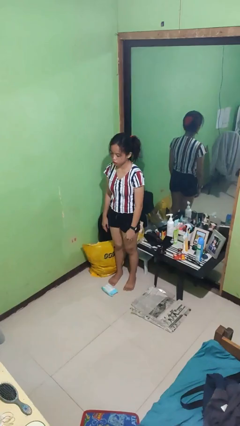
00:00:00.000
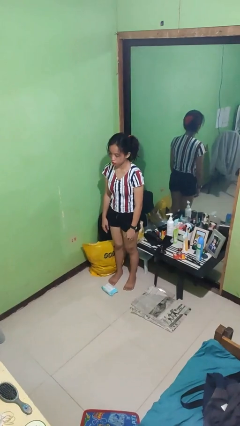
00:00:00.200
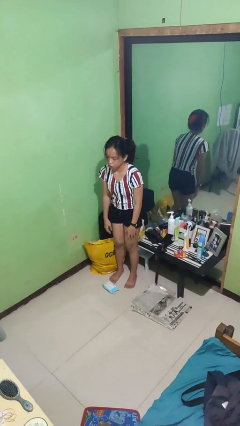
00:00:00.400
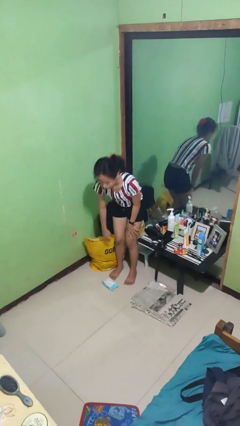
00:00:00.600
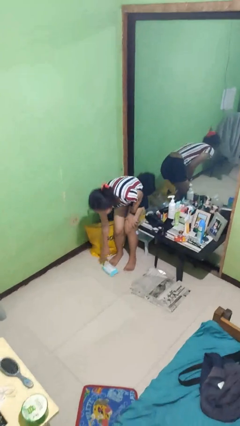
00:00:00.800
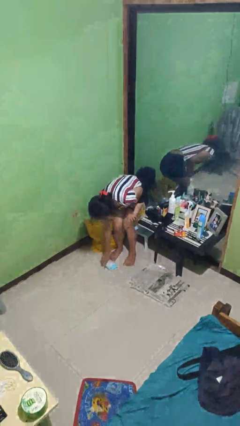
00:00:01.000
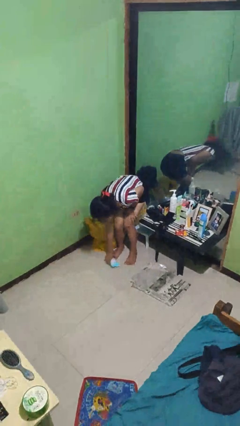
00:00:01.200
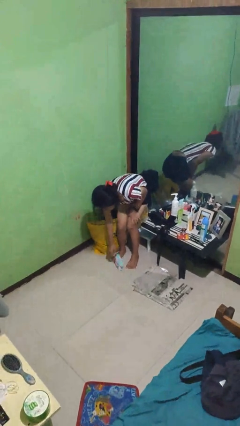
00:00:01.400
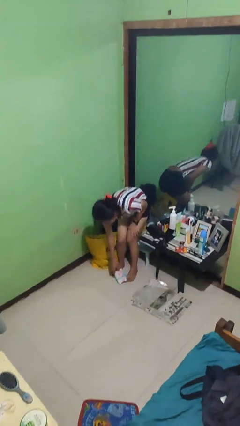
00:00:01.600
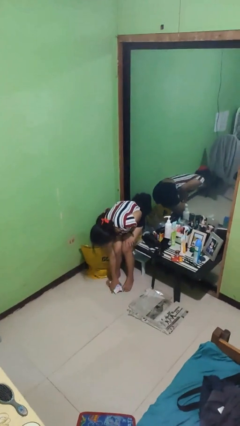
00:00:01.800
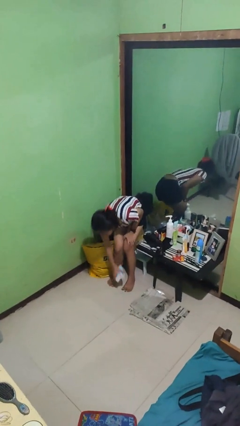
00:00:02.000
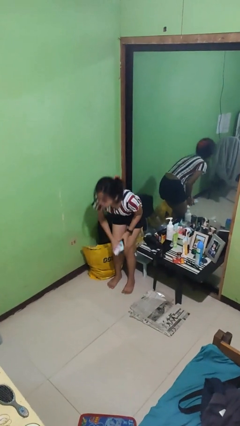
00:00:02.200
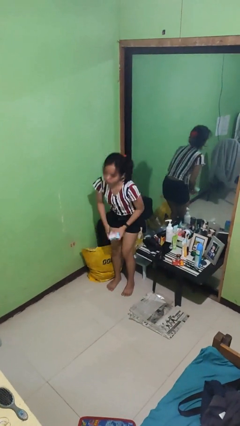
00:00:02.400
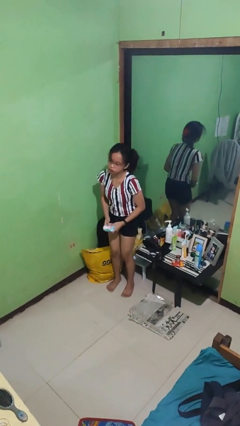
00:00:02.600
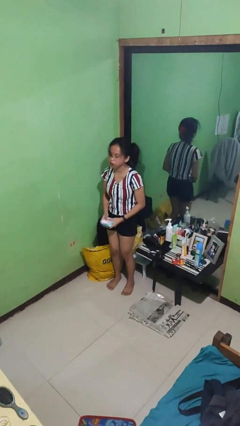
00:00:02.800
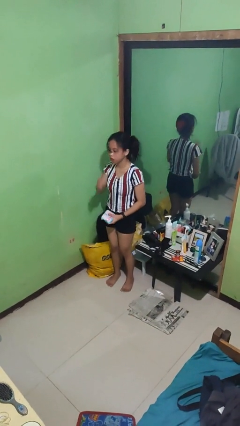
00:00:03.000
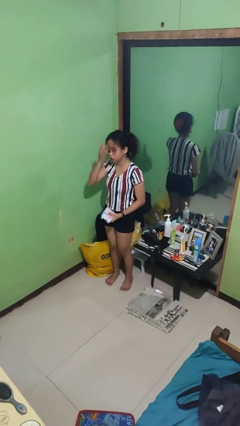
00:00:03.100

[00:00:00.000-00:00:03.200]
person picks up object from floor

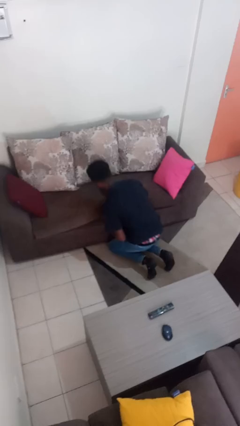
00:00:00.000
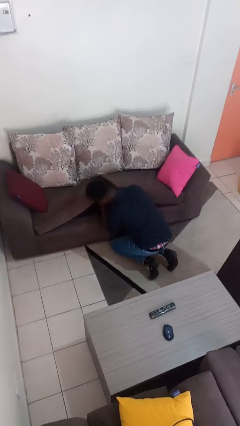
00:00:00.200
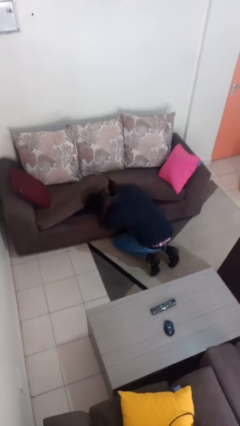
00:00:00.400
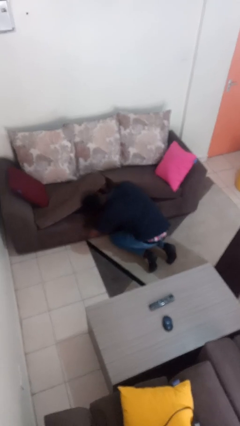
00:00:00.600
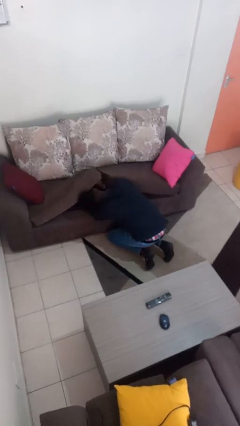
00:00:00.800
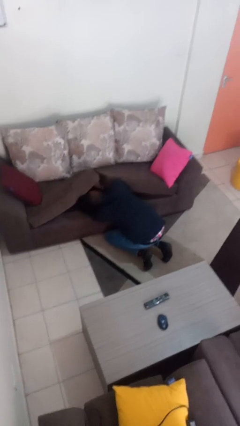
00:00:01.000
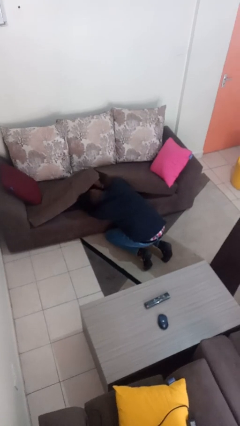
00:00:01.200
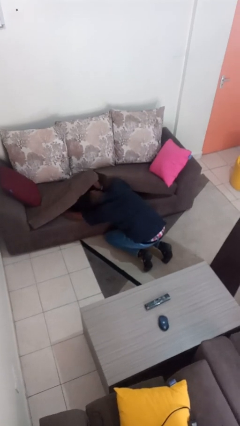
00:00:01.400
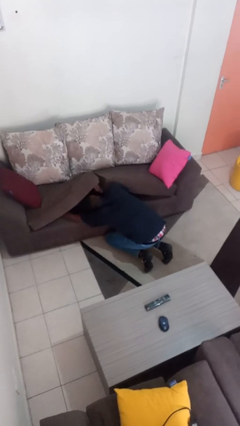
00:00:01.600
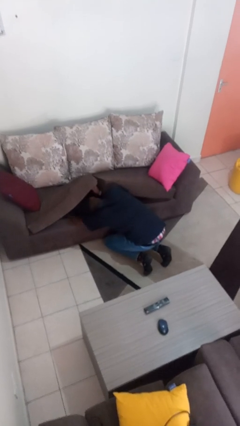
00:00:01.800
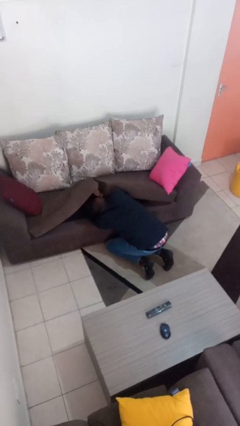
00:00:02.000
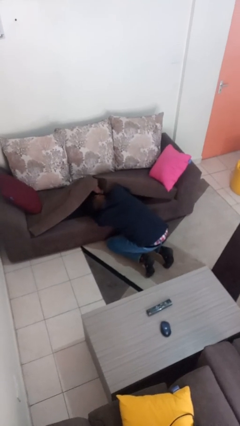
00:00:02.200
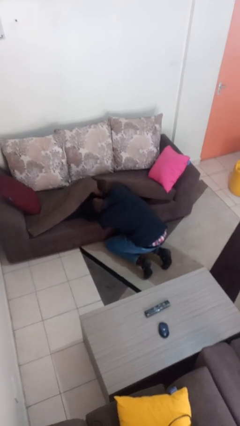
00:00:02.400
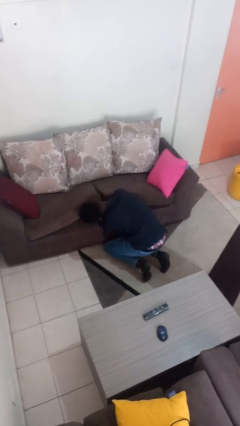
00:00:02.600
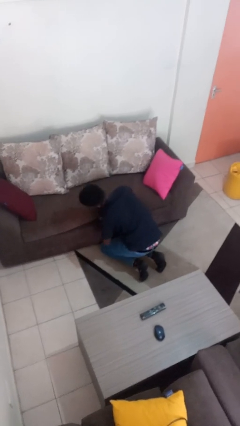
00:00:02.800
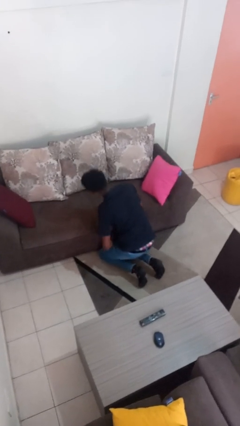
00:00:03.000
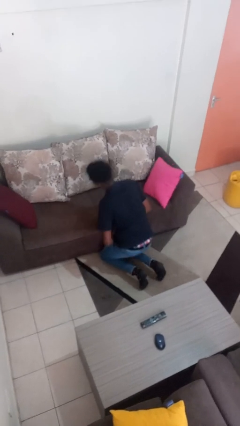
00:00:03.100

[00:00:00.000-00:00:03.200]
person searches under couch

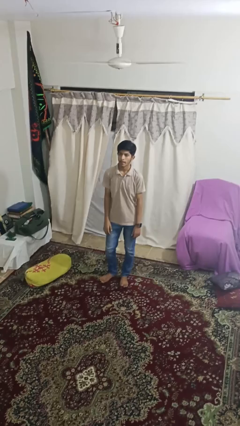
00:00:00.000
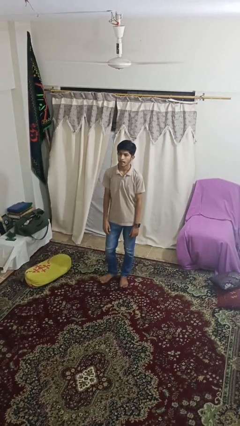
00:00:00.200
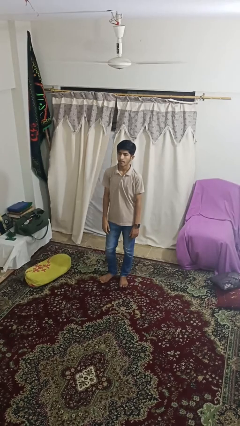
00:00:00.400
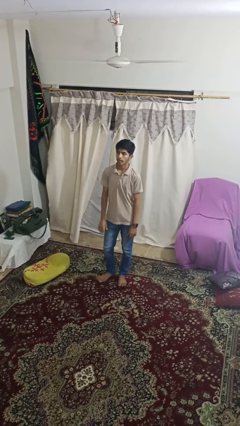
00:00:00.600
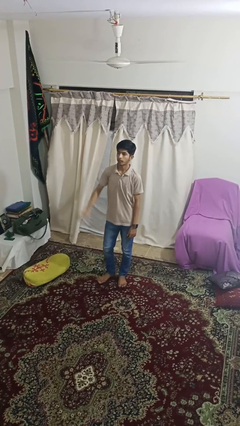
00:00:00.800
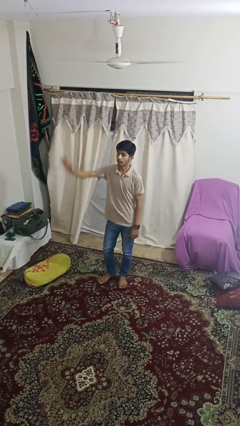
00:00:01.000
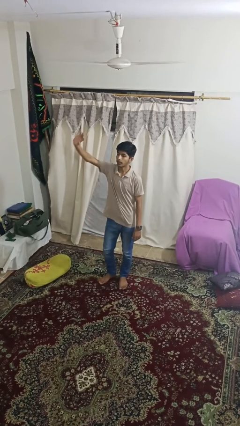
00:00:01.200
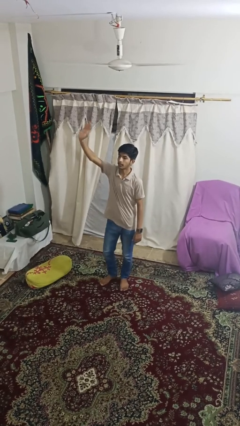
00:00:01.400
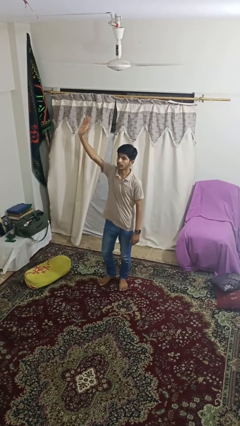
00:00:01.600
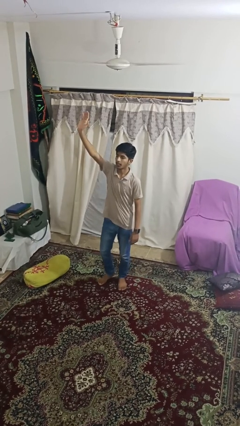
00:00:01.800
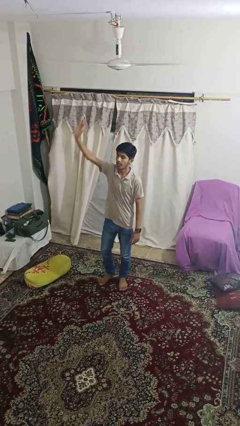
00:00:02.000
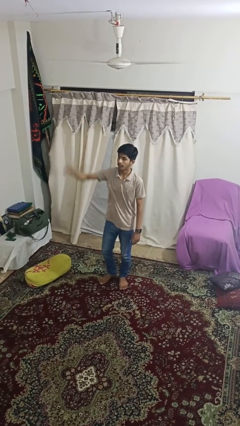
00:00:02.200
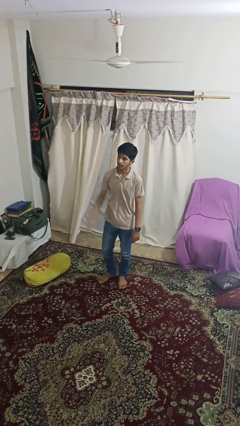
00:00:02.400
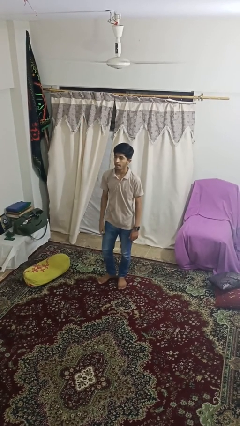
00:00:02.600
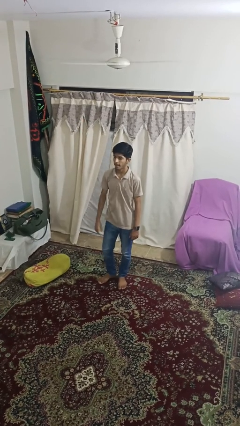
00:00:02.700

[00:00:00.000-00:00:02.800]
person waves at person

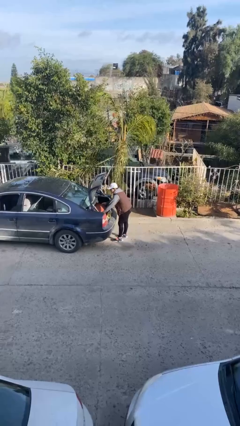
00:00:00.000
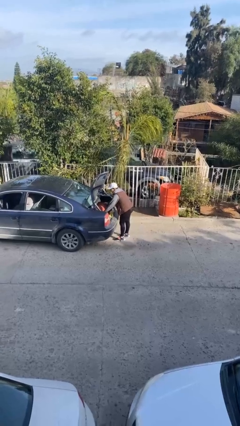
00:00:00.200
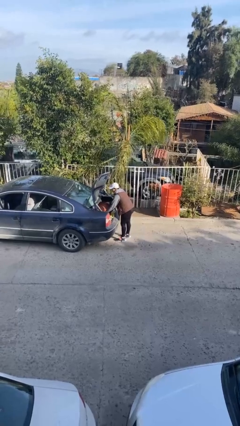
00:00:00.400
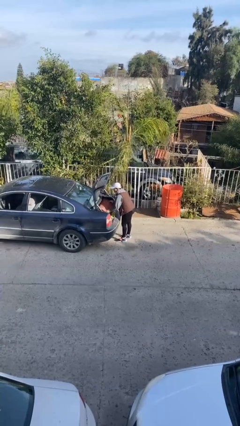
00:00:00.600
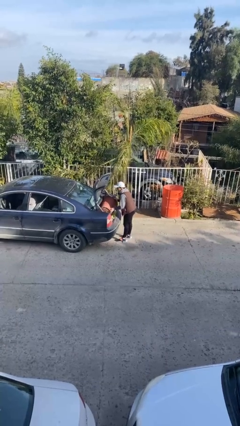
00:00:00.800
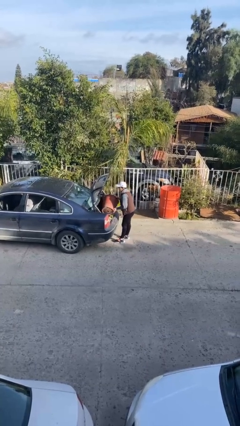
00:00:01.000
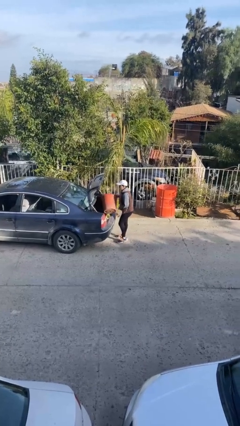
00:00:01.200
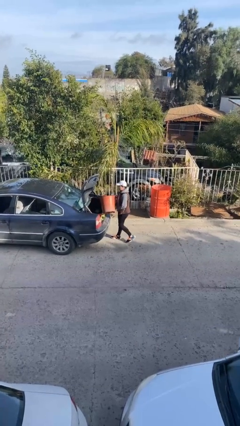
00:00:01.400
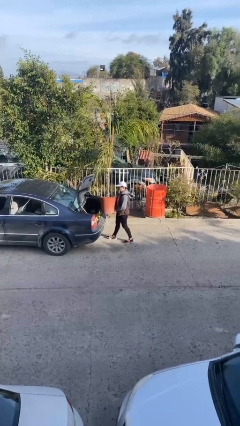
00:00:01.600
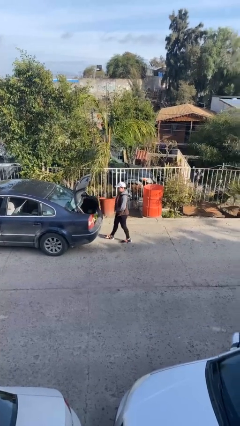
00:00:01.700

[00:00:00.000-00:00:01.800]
person unloads car

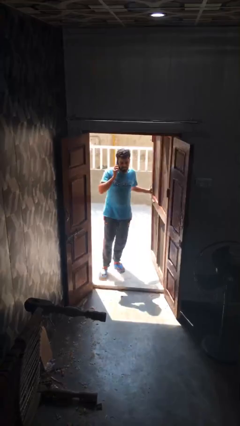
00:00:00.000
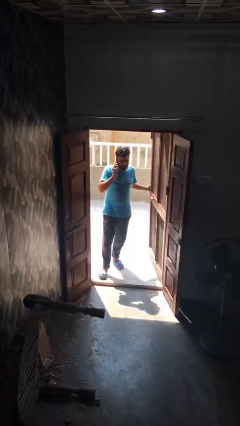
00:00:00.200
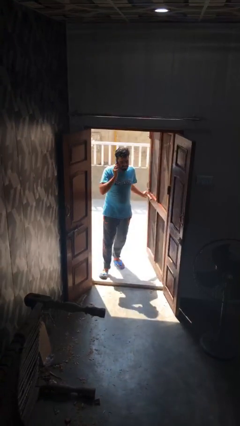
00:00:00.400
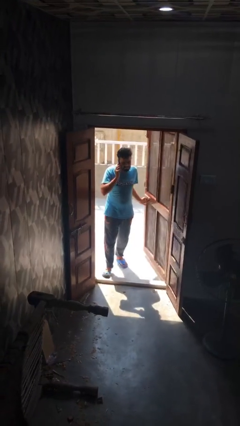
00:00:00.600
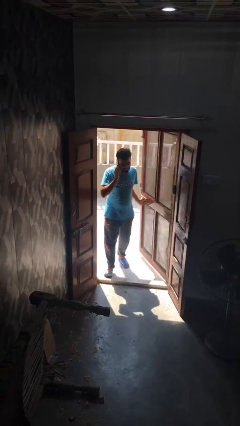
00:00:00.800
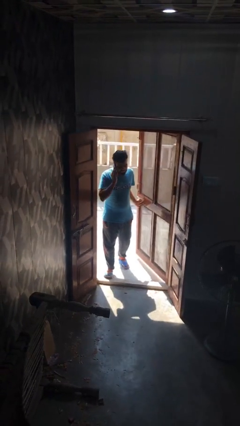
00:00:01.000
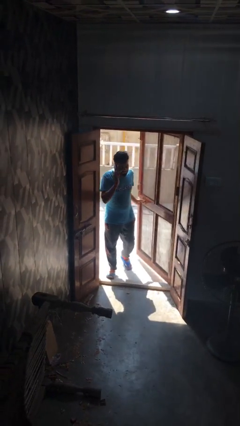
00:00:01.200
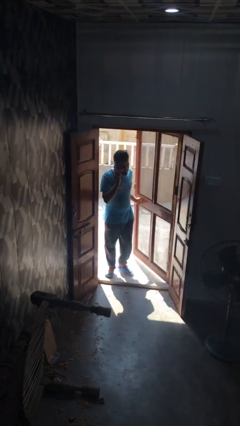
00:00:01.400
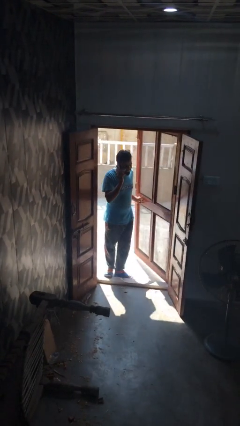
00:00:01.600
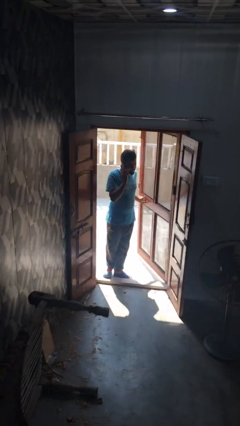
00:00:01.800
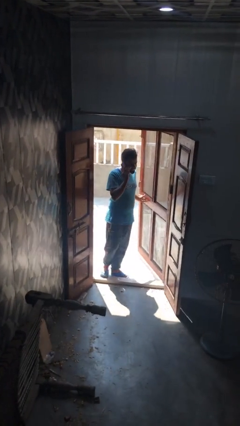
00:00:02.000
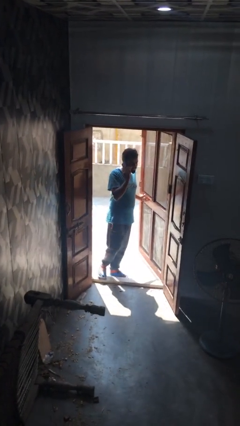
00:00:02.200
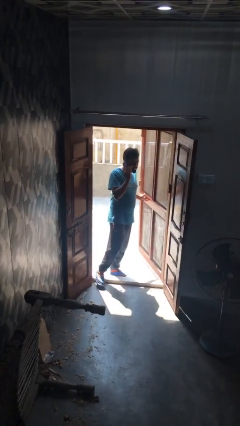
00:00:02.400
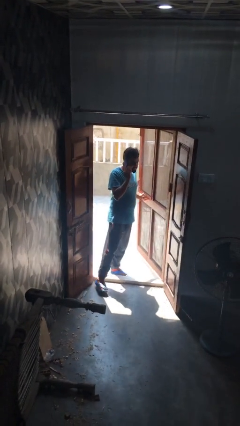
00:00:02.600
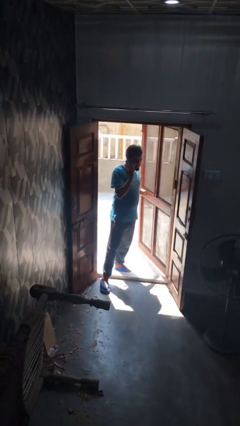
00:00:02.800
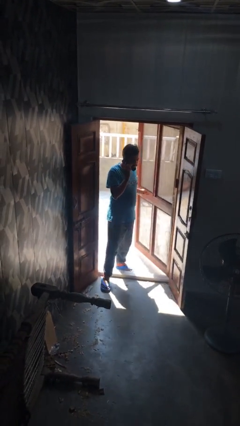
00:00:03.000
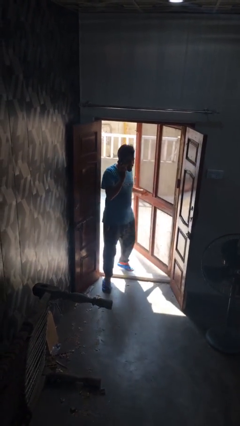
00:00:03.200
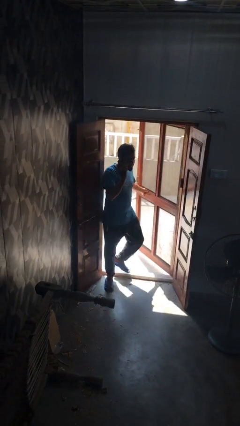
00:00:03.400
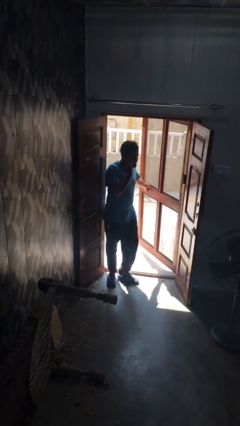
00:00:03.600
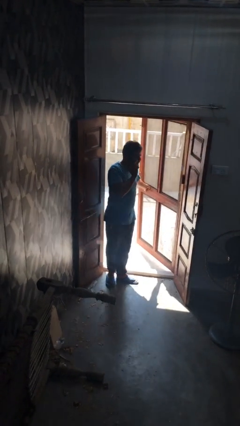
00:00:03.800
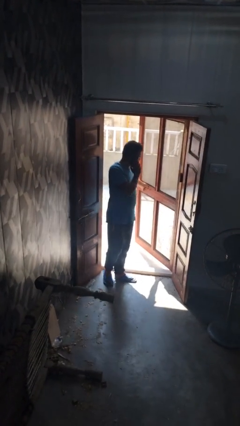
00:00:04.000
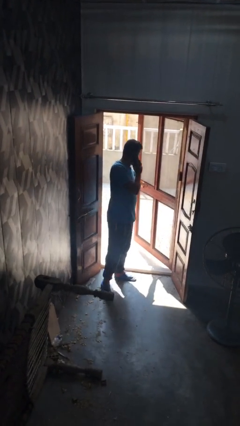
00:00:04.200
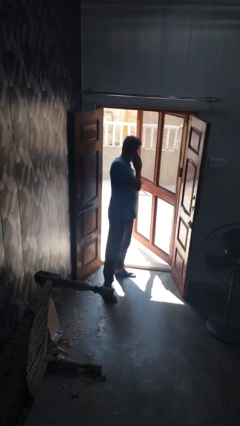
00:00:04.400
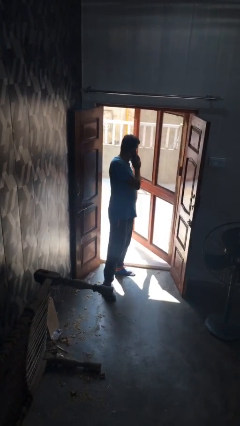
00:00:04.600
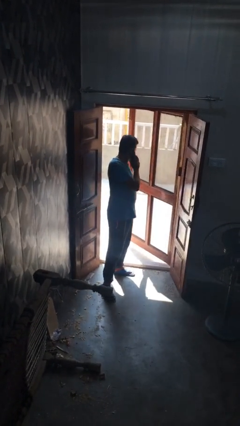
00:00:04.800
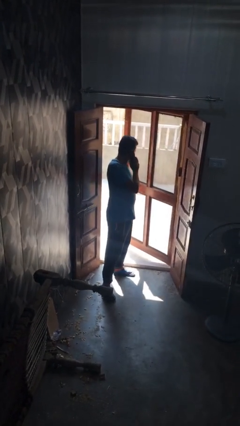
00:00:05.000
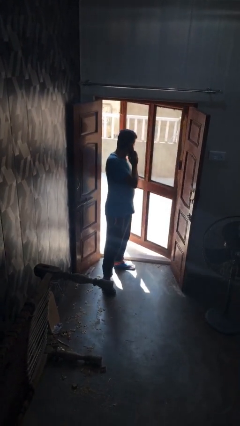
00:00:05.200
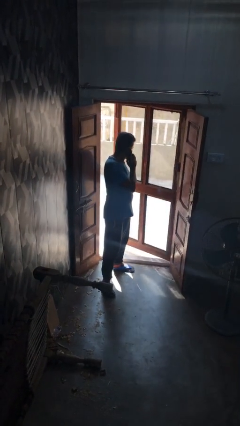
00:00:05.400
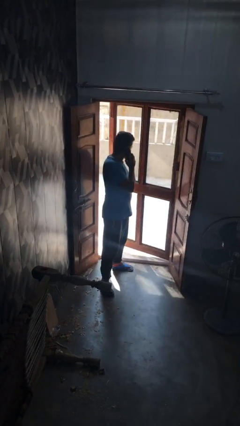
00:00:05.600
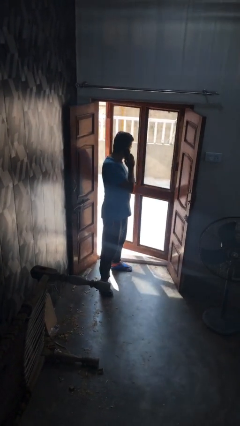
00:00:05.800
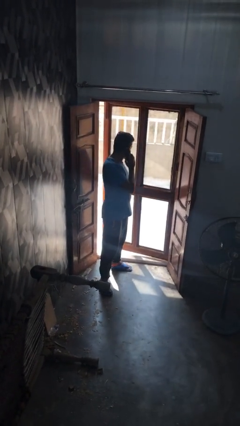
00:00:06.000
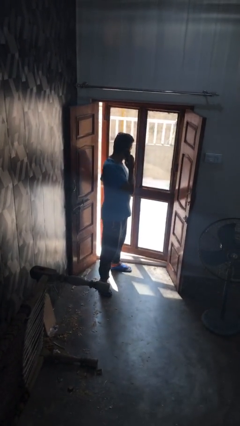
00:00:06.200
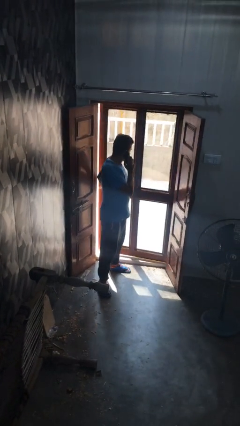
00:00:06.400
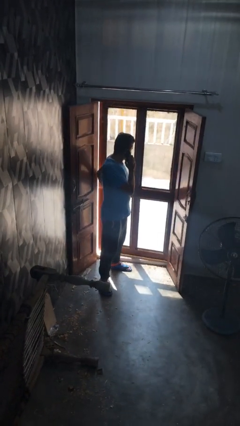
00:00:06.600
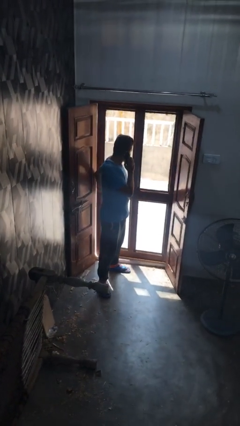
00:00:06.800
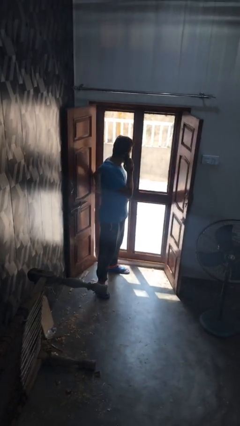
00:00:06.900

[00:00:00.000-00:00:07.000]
person enters scene through structure
